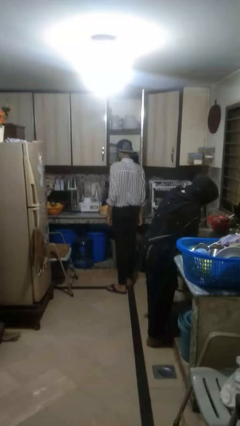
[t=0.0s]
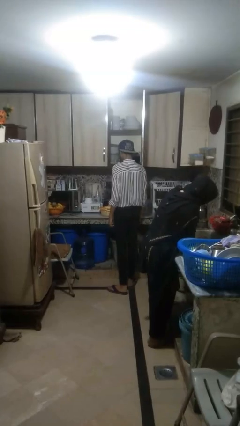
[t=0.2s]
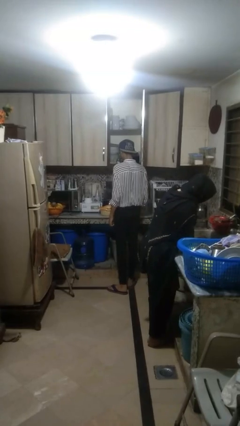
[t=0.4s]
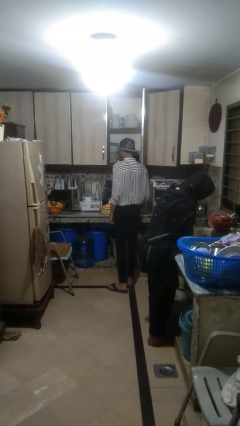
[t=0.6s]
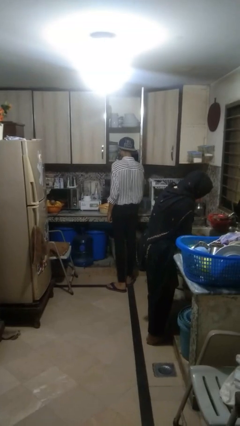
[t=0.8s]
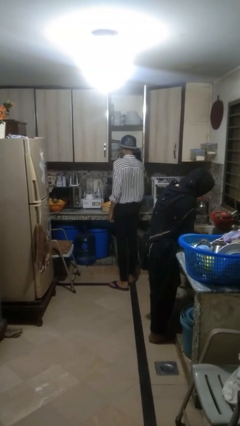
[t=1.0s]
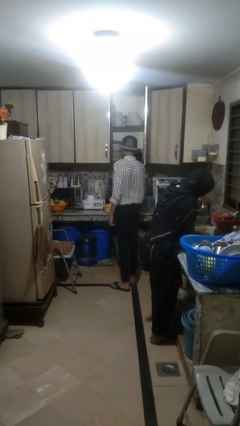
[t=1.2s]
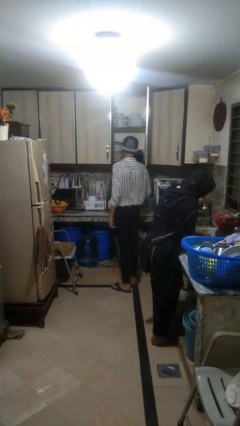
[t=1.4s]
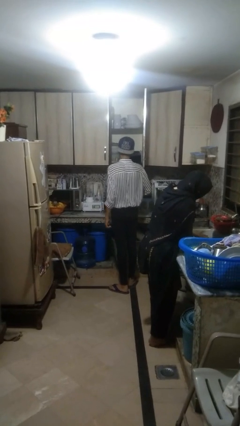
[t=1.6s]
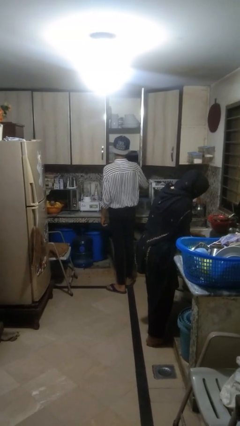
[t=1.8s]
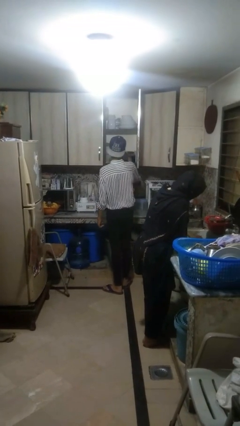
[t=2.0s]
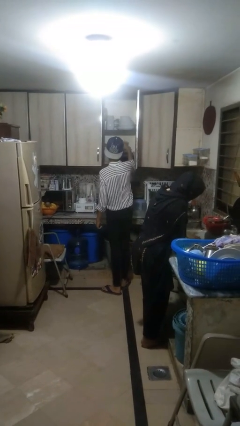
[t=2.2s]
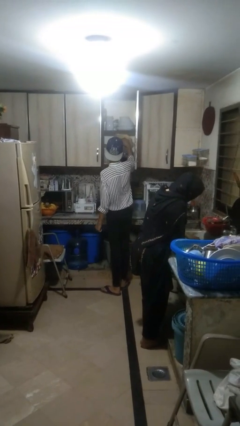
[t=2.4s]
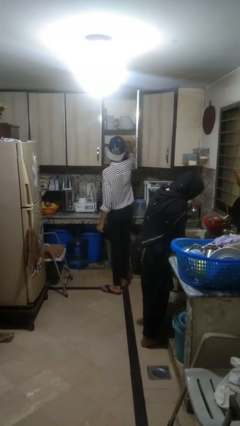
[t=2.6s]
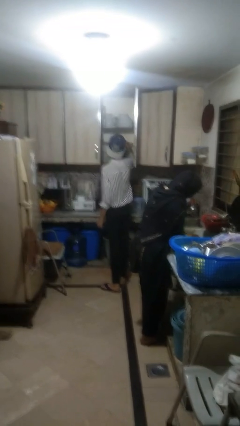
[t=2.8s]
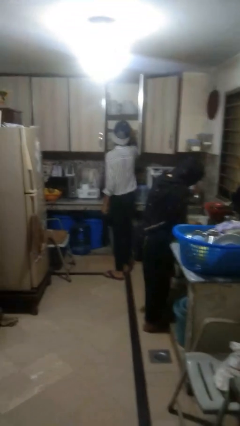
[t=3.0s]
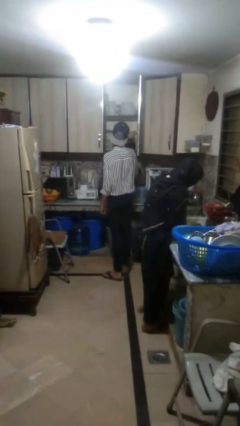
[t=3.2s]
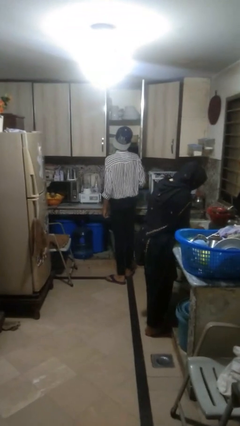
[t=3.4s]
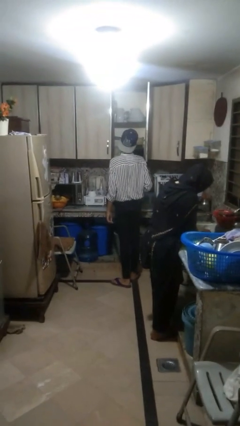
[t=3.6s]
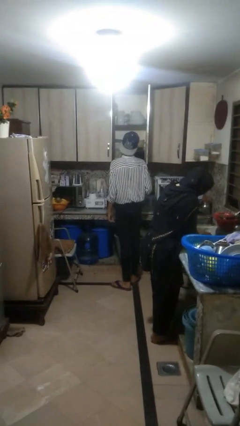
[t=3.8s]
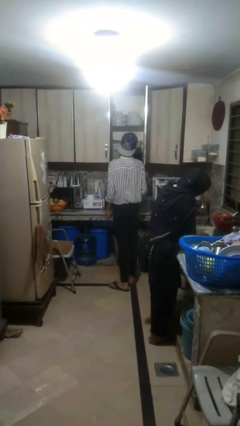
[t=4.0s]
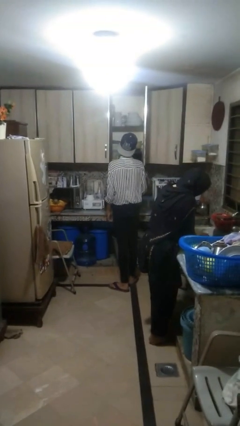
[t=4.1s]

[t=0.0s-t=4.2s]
person puts object in cabinet

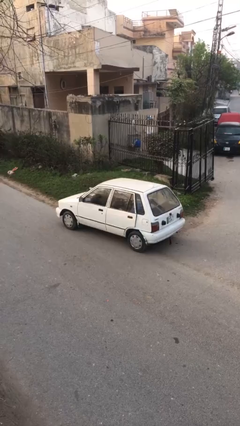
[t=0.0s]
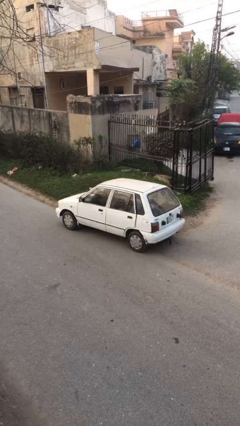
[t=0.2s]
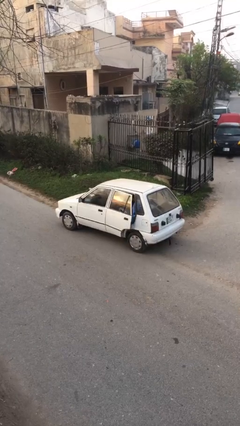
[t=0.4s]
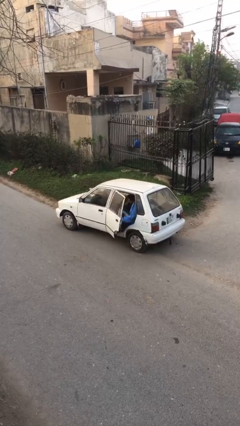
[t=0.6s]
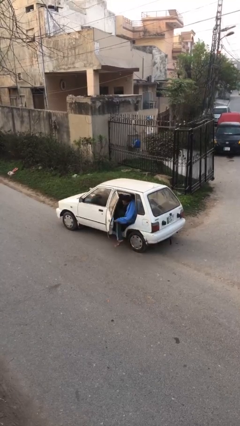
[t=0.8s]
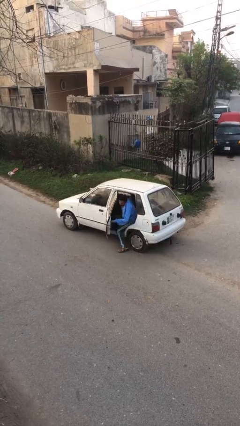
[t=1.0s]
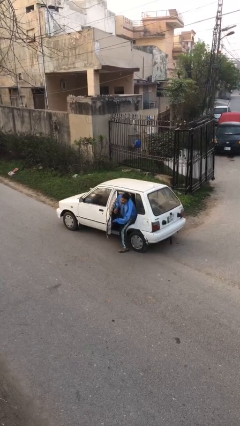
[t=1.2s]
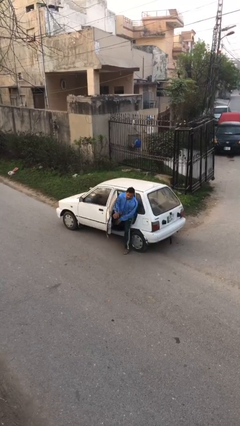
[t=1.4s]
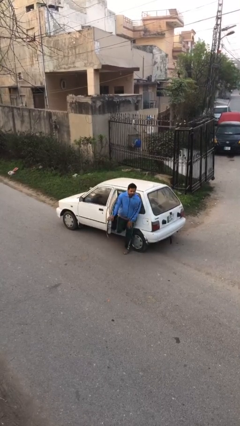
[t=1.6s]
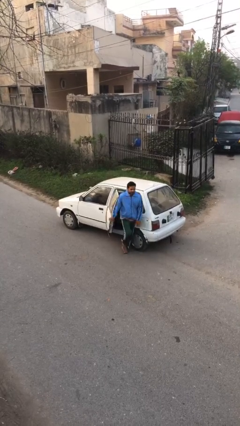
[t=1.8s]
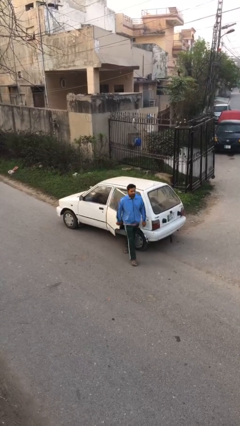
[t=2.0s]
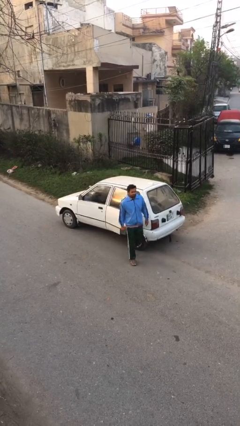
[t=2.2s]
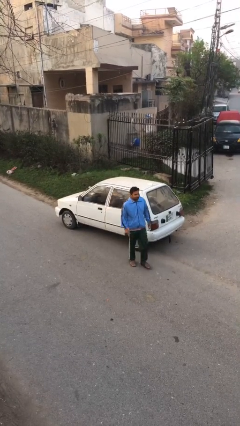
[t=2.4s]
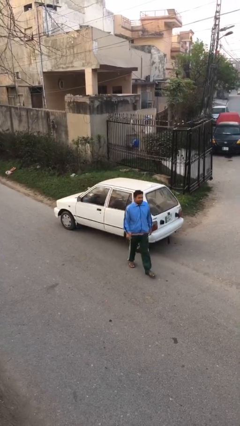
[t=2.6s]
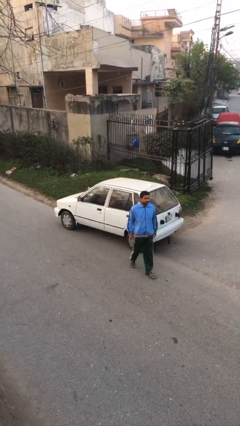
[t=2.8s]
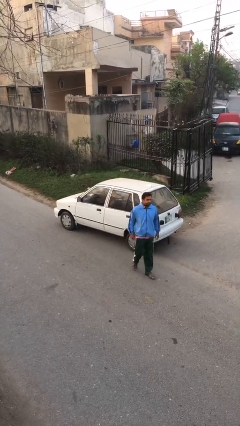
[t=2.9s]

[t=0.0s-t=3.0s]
car drops off person

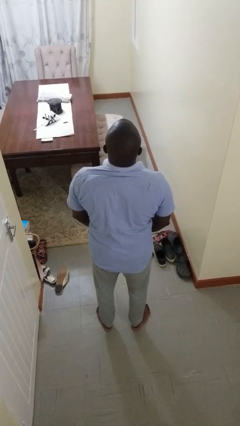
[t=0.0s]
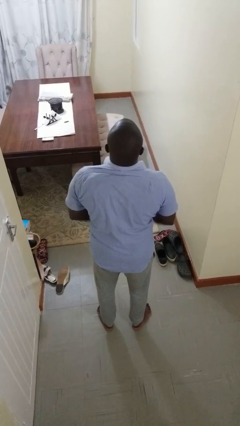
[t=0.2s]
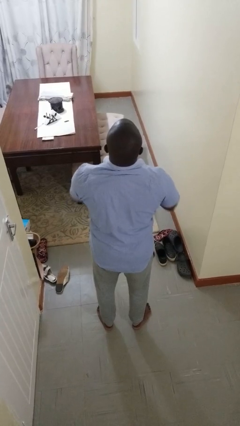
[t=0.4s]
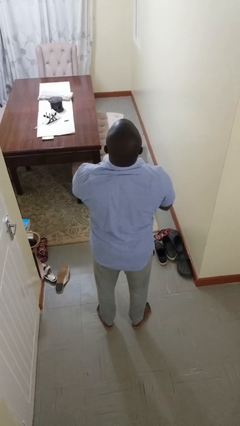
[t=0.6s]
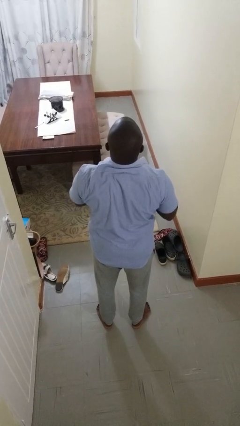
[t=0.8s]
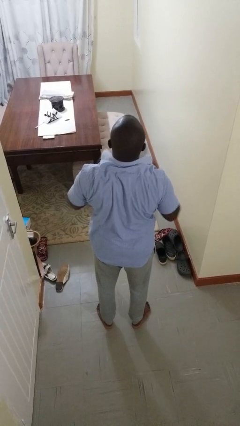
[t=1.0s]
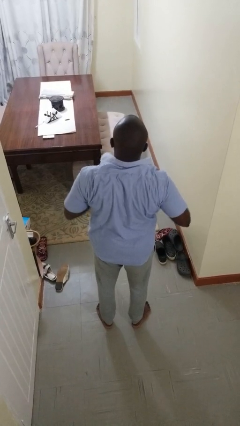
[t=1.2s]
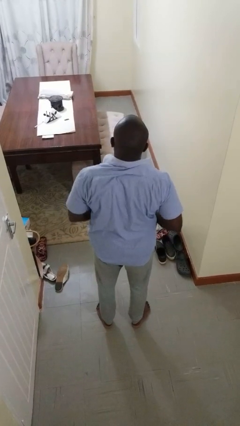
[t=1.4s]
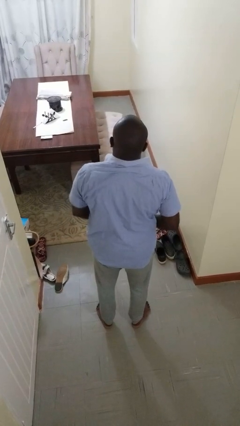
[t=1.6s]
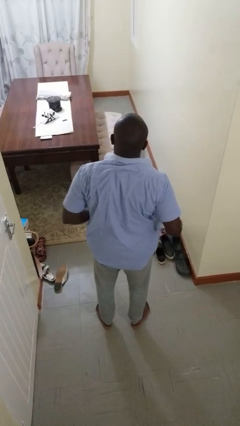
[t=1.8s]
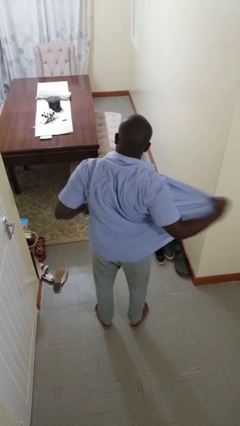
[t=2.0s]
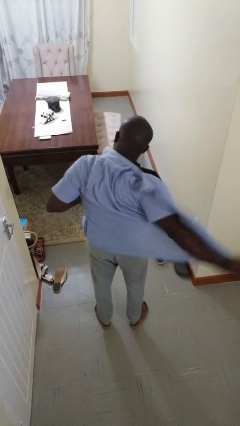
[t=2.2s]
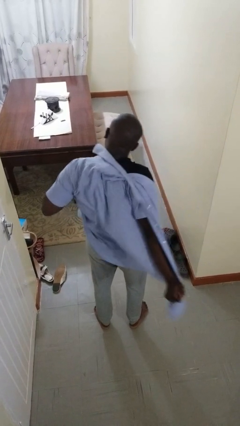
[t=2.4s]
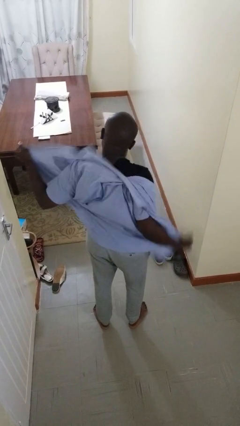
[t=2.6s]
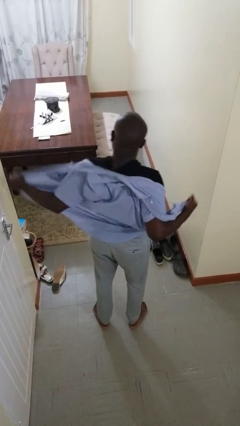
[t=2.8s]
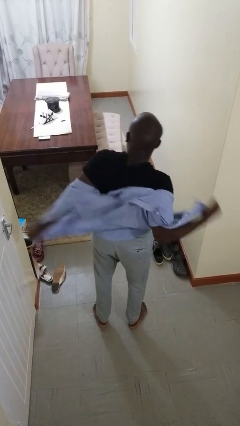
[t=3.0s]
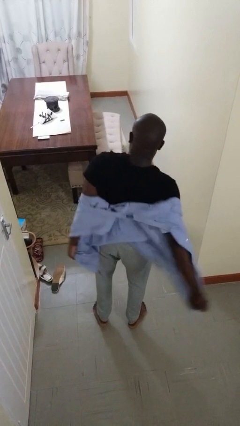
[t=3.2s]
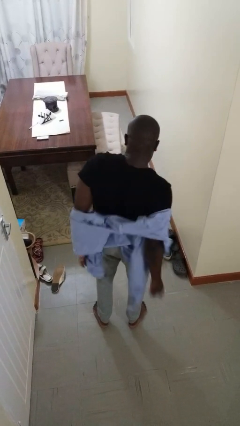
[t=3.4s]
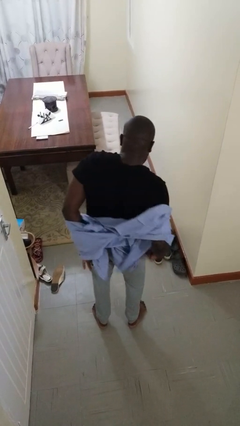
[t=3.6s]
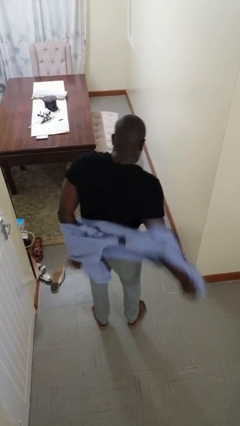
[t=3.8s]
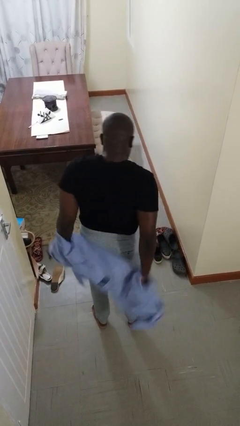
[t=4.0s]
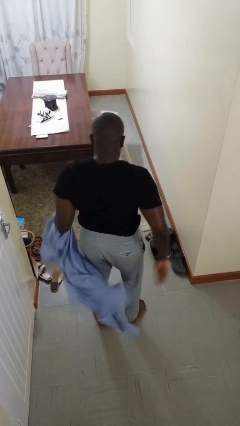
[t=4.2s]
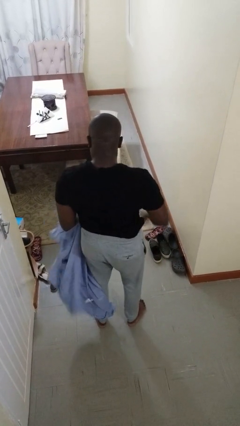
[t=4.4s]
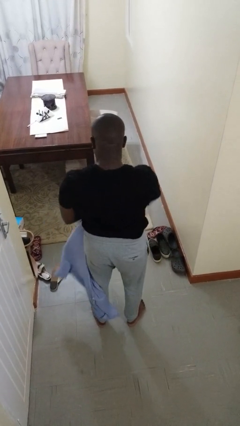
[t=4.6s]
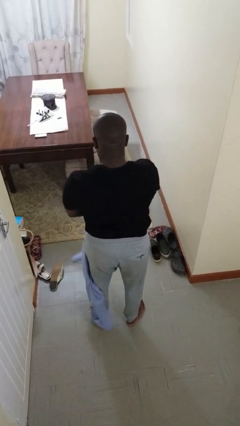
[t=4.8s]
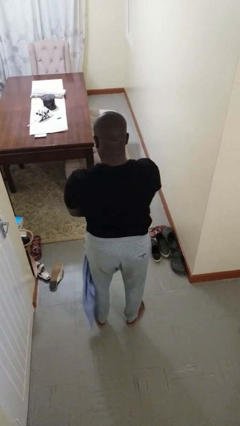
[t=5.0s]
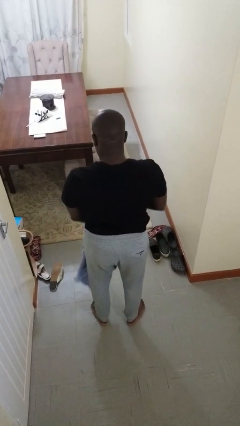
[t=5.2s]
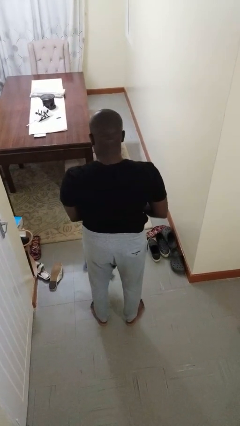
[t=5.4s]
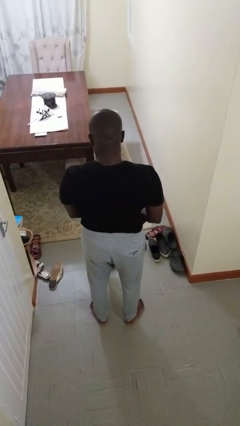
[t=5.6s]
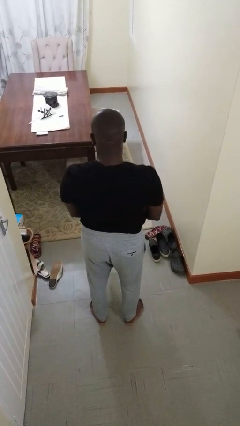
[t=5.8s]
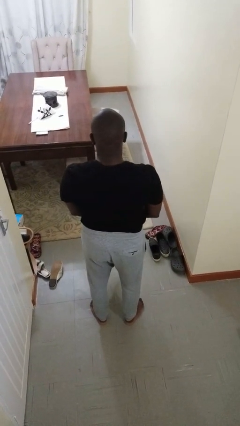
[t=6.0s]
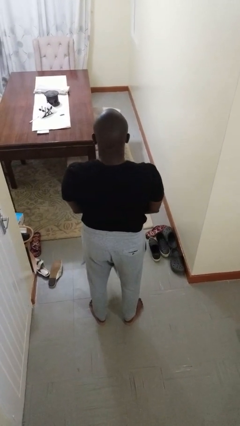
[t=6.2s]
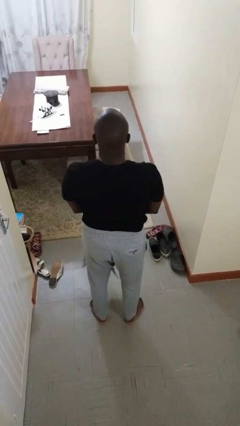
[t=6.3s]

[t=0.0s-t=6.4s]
person takes off shirt

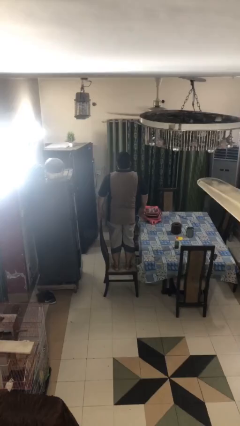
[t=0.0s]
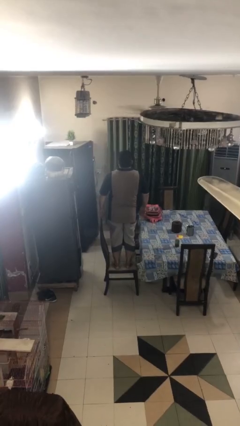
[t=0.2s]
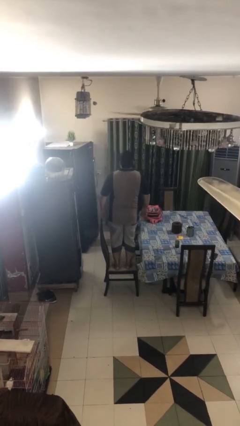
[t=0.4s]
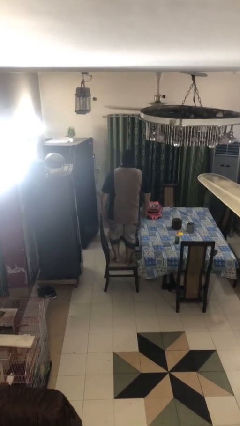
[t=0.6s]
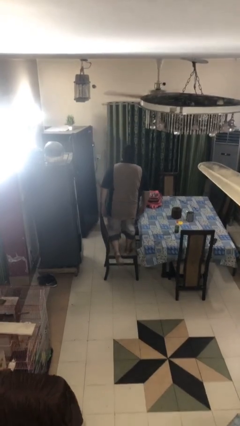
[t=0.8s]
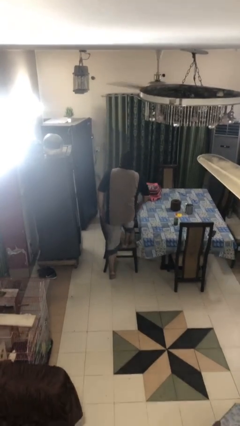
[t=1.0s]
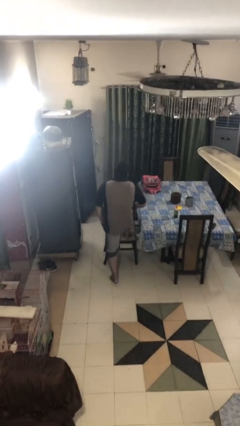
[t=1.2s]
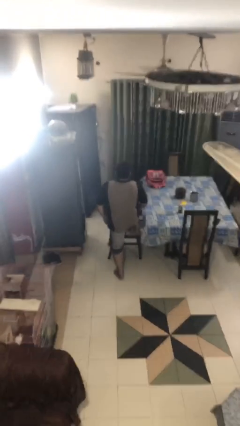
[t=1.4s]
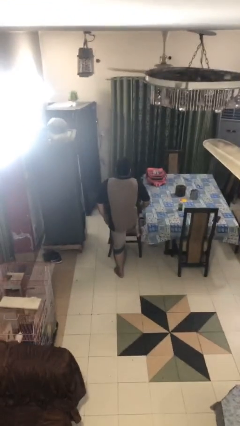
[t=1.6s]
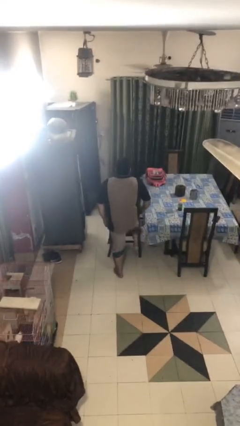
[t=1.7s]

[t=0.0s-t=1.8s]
person climbs off chair

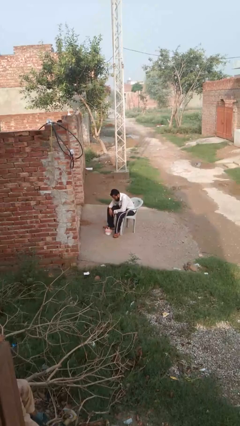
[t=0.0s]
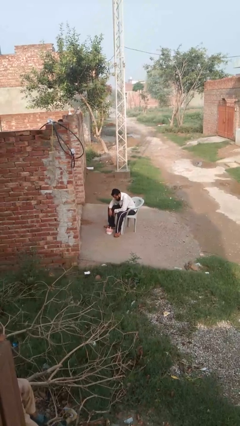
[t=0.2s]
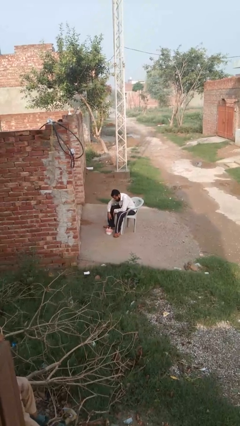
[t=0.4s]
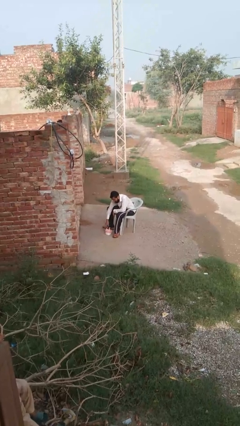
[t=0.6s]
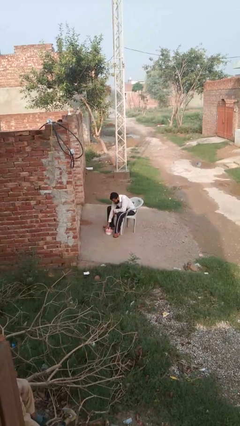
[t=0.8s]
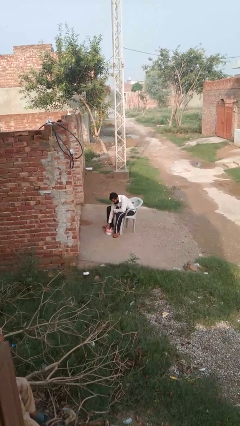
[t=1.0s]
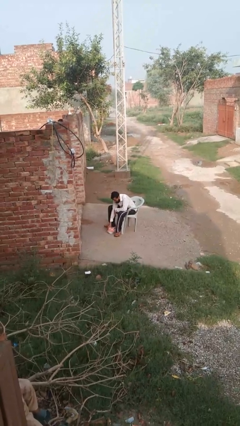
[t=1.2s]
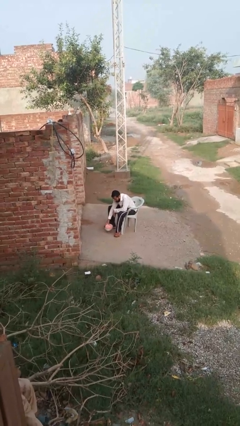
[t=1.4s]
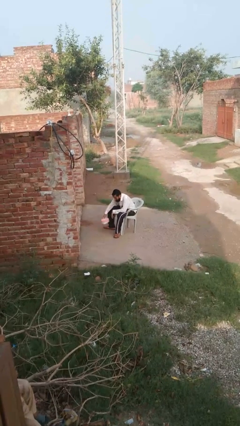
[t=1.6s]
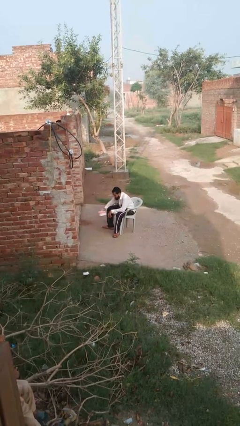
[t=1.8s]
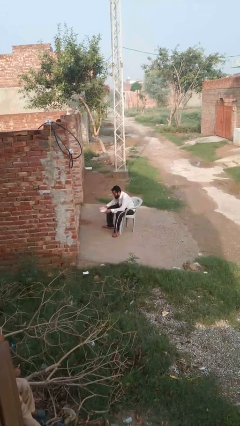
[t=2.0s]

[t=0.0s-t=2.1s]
person picks up object from floor
